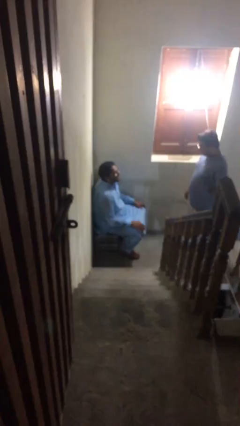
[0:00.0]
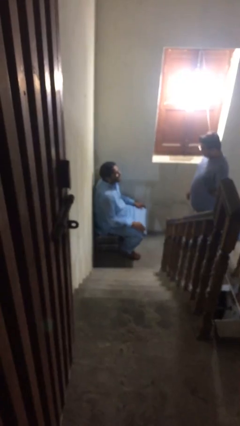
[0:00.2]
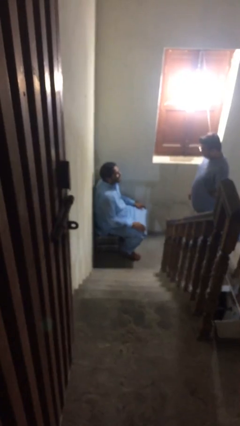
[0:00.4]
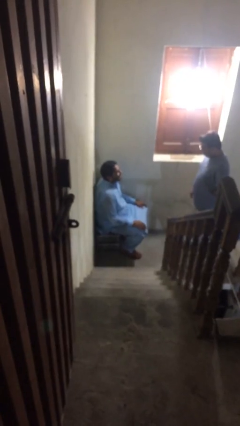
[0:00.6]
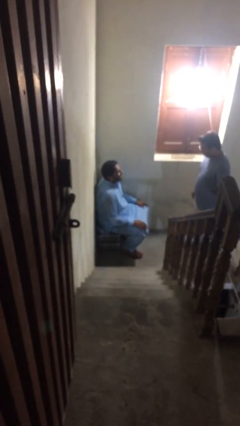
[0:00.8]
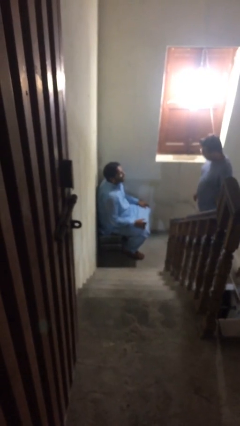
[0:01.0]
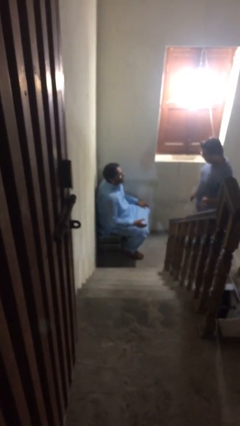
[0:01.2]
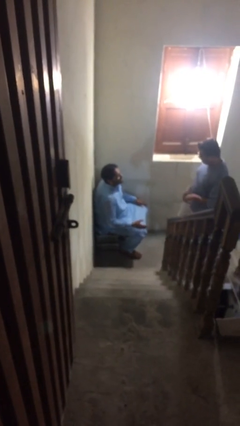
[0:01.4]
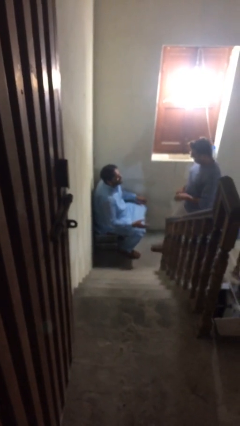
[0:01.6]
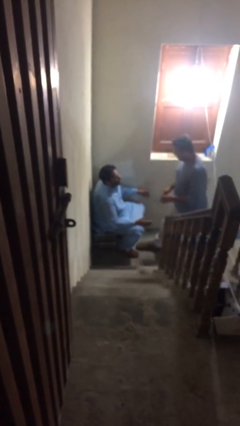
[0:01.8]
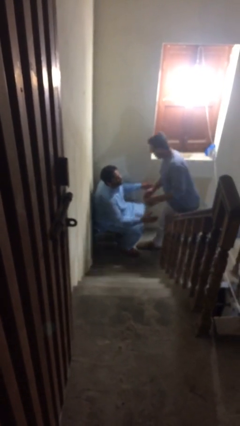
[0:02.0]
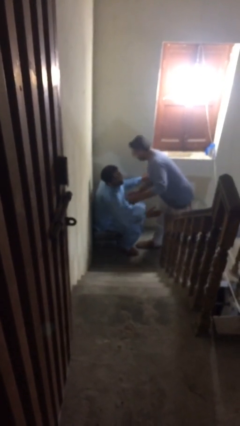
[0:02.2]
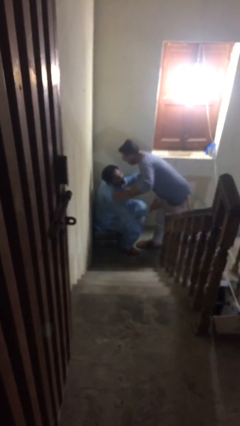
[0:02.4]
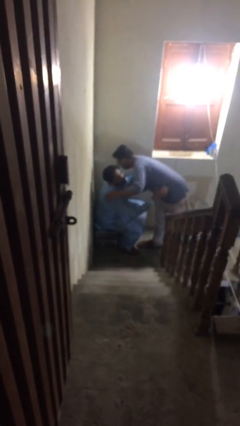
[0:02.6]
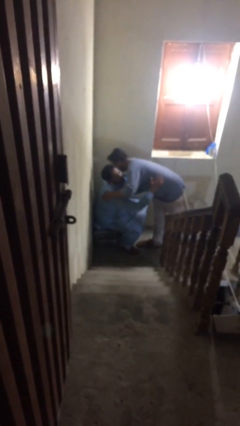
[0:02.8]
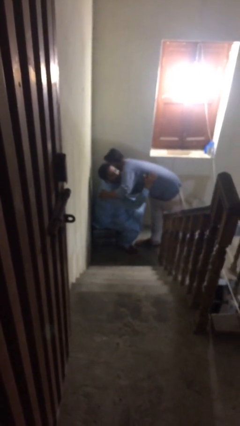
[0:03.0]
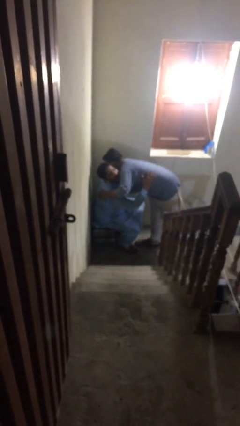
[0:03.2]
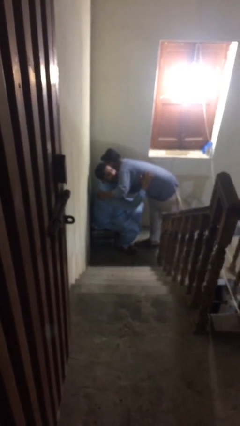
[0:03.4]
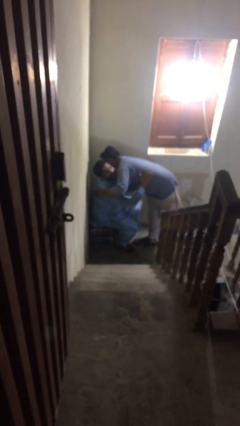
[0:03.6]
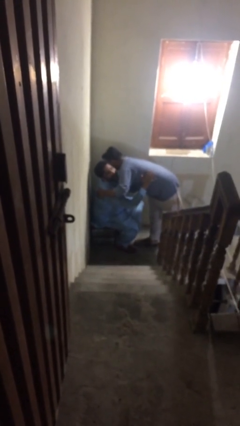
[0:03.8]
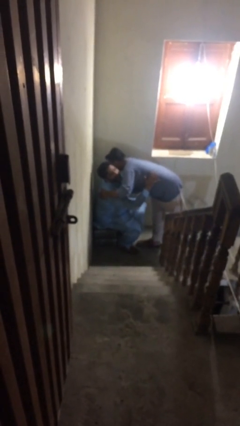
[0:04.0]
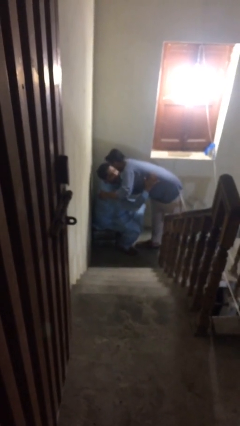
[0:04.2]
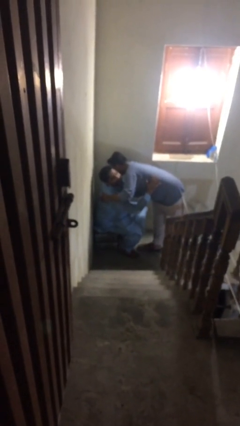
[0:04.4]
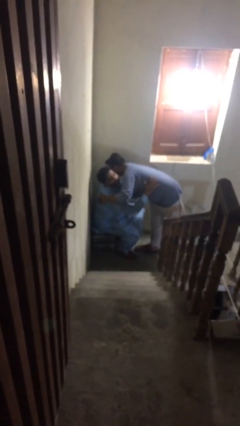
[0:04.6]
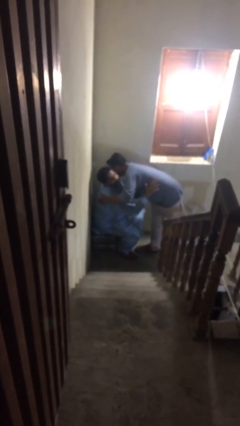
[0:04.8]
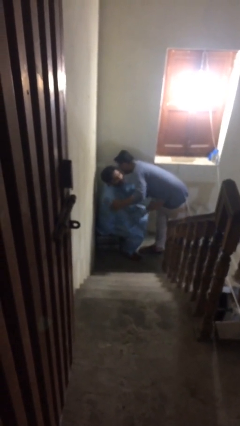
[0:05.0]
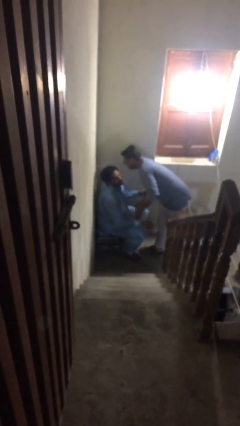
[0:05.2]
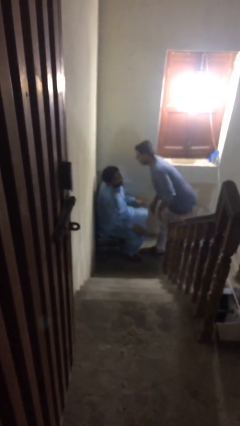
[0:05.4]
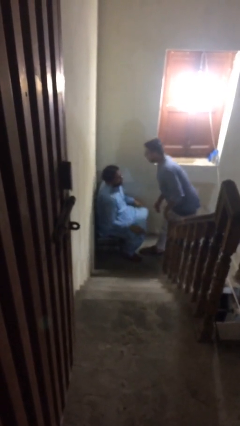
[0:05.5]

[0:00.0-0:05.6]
person embraces person

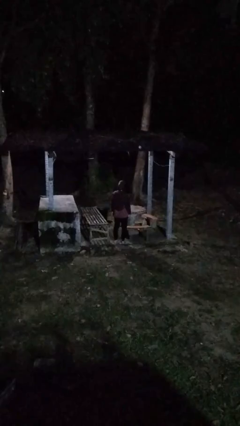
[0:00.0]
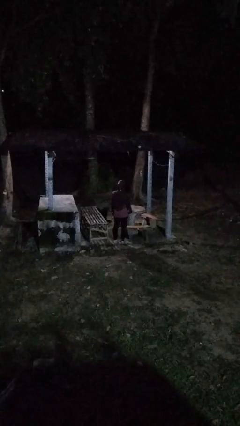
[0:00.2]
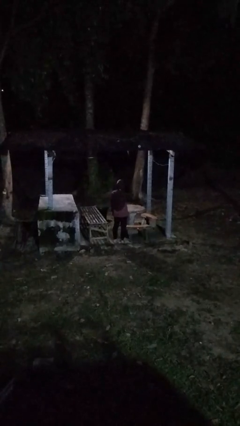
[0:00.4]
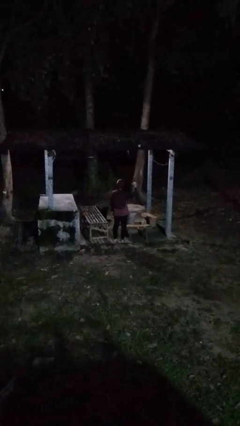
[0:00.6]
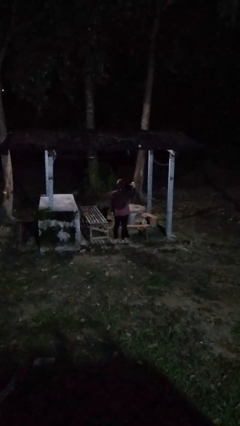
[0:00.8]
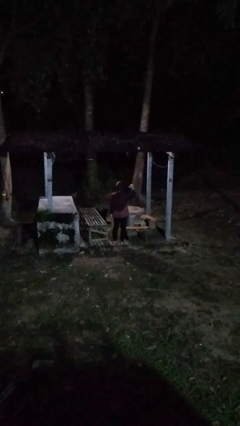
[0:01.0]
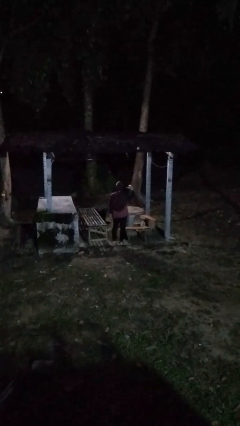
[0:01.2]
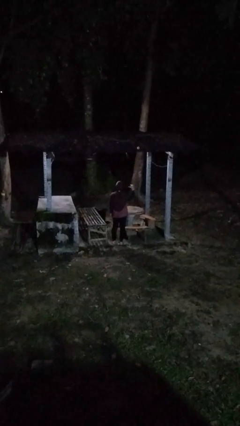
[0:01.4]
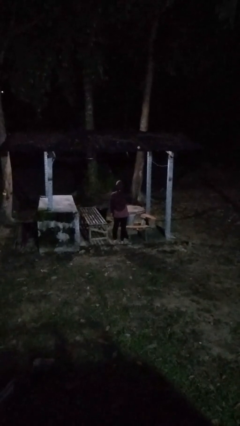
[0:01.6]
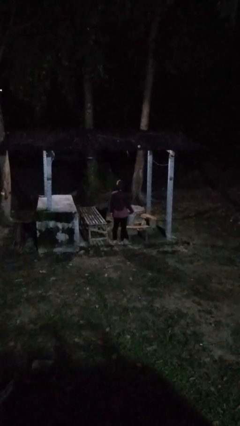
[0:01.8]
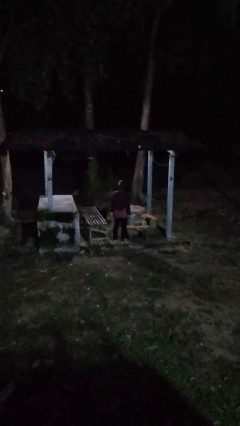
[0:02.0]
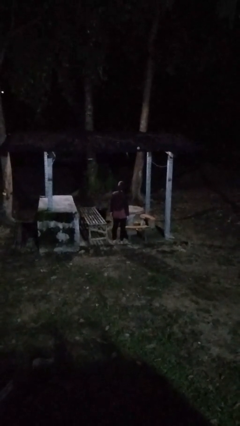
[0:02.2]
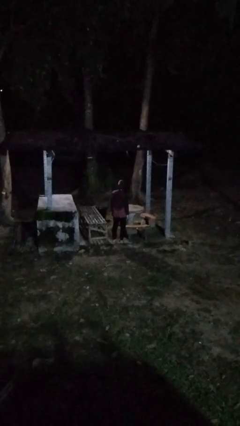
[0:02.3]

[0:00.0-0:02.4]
person gestures behind me

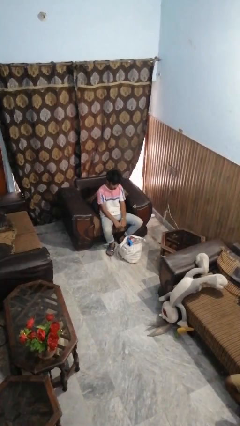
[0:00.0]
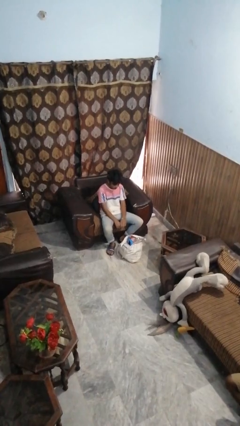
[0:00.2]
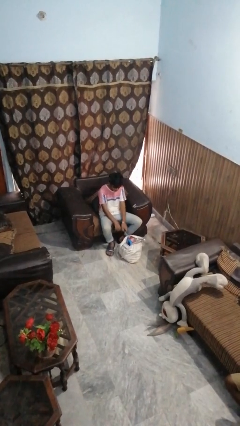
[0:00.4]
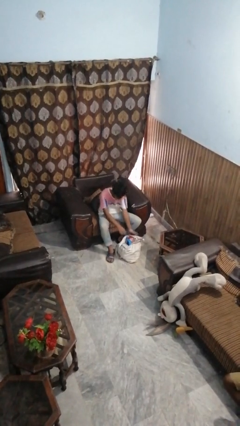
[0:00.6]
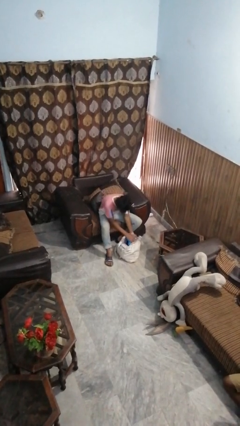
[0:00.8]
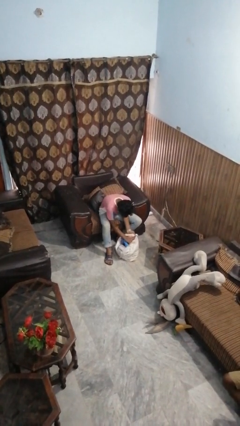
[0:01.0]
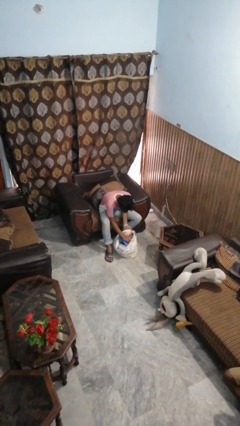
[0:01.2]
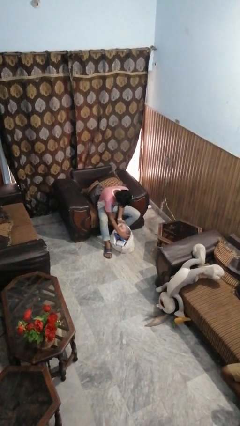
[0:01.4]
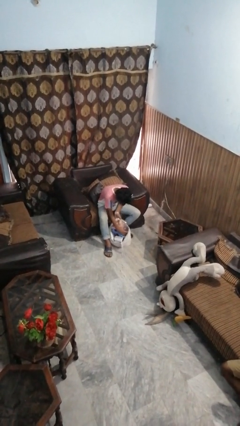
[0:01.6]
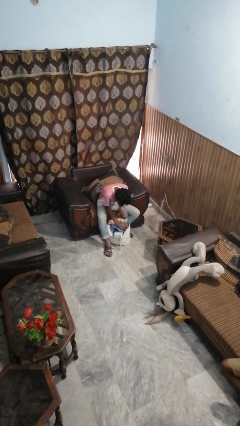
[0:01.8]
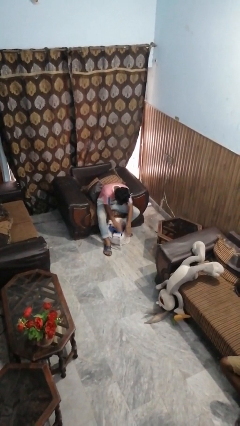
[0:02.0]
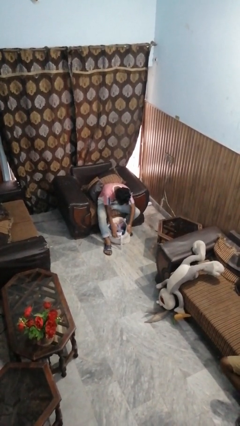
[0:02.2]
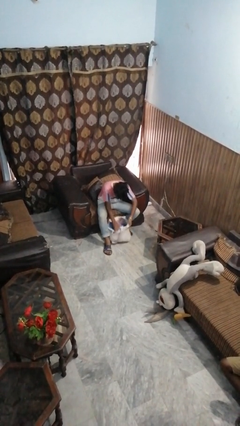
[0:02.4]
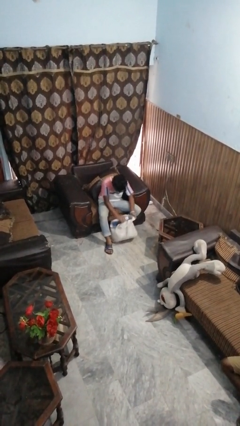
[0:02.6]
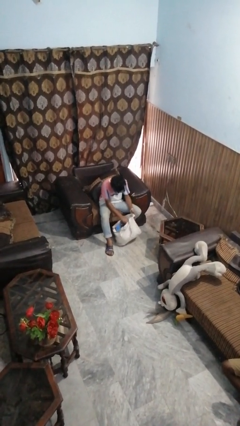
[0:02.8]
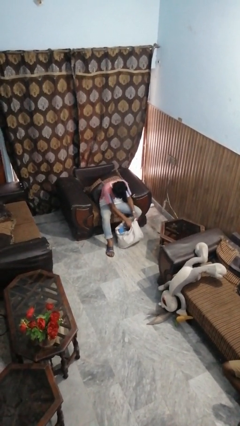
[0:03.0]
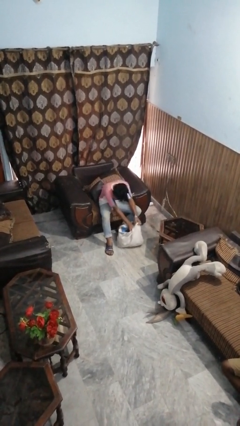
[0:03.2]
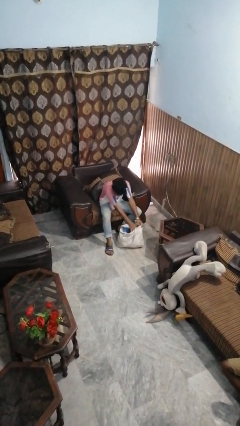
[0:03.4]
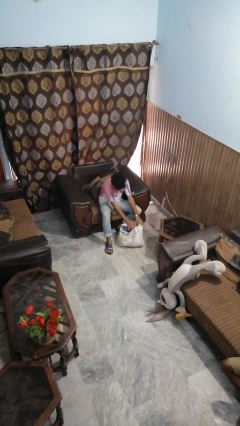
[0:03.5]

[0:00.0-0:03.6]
person searches in bag

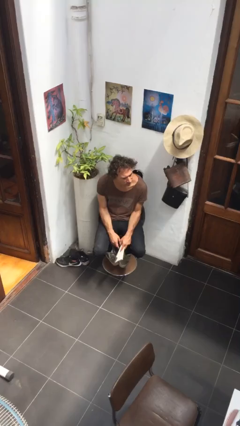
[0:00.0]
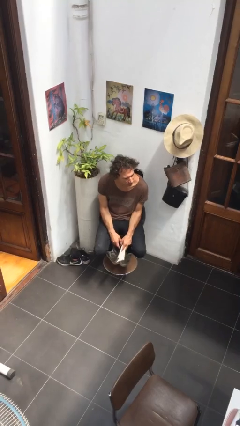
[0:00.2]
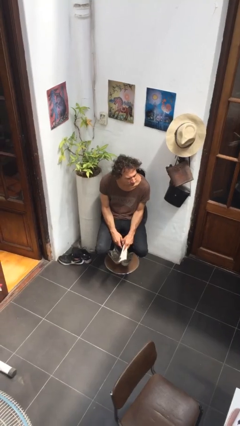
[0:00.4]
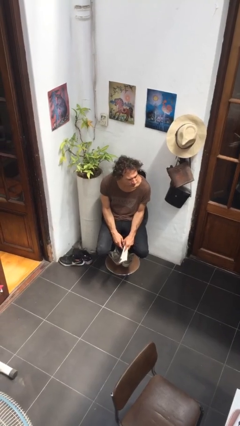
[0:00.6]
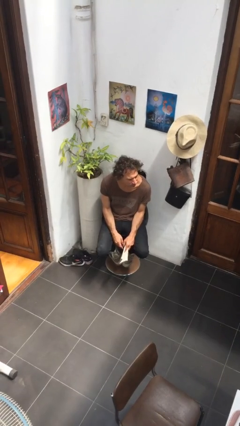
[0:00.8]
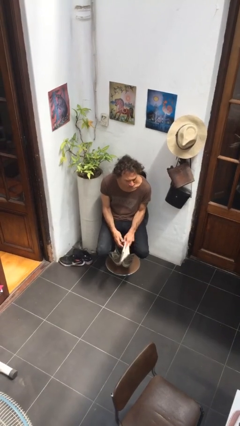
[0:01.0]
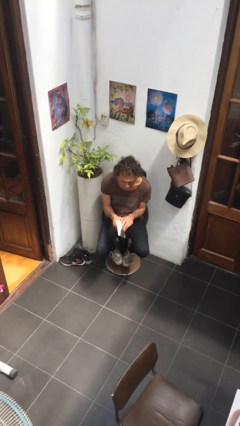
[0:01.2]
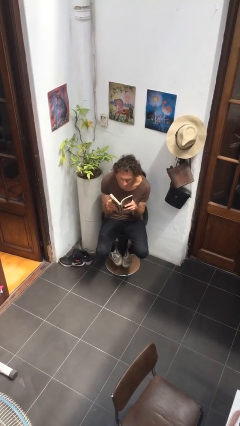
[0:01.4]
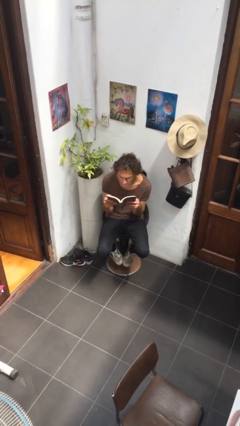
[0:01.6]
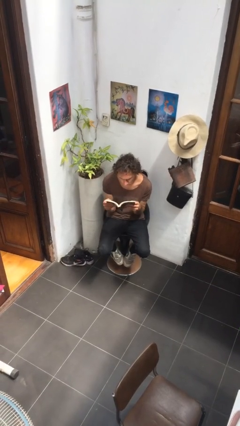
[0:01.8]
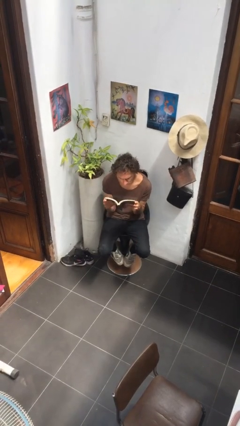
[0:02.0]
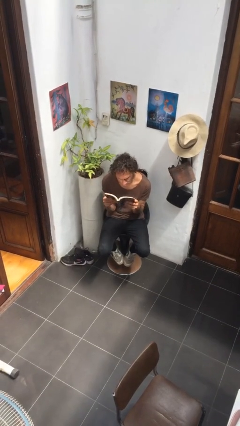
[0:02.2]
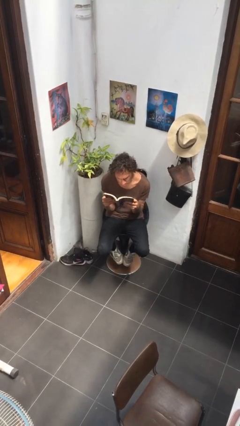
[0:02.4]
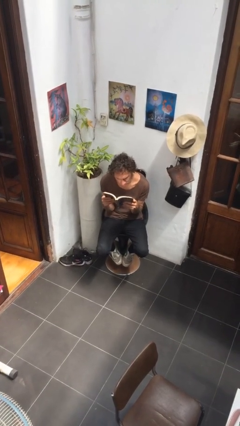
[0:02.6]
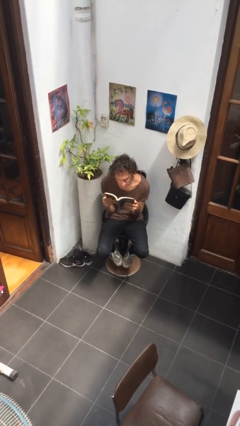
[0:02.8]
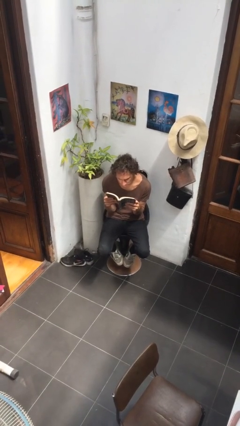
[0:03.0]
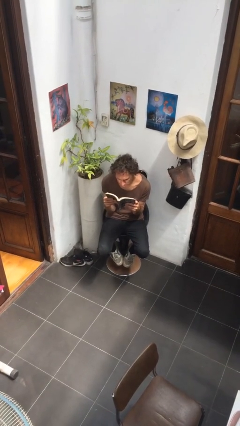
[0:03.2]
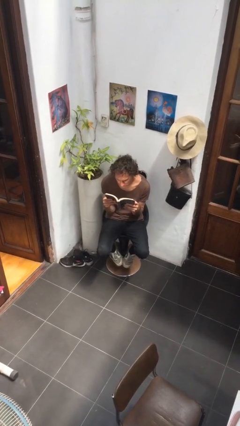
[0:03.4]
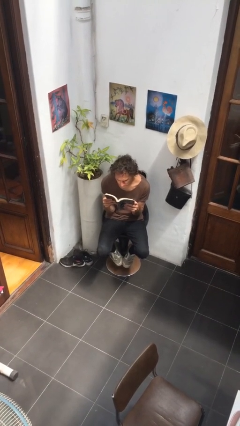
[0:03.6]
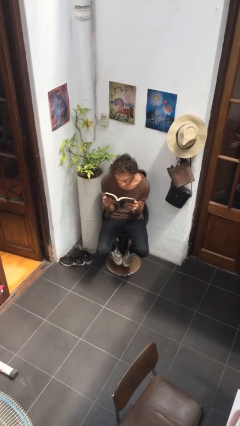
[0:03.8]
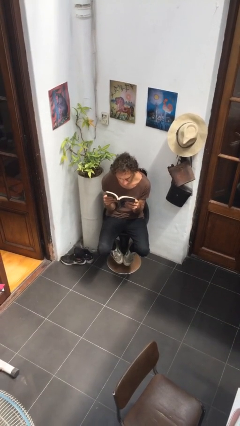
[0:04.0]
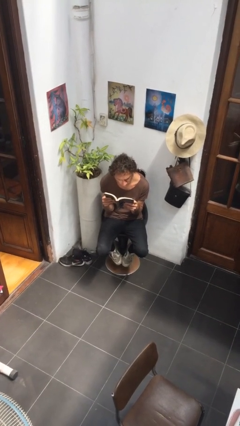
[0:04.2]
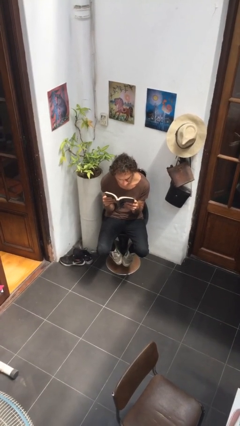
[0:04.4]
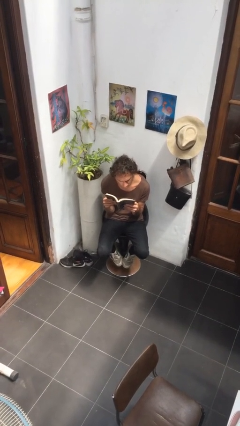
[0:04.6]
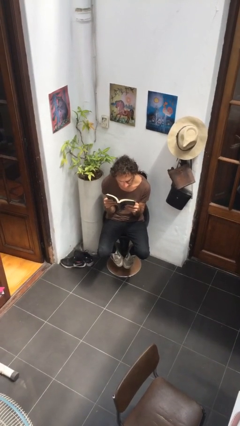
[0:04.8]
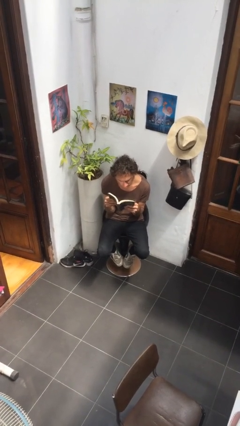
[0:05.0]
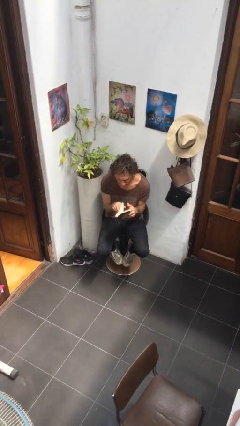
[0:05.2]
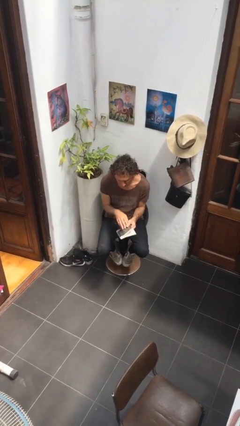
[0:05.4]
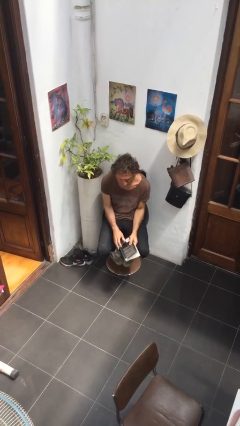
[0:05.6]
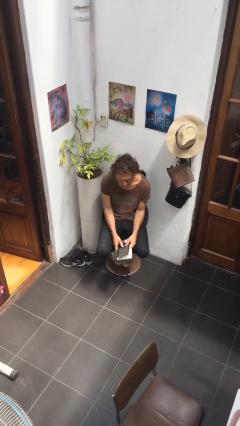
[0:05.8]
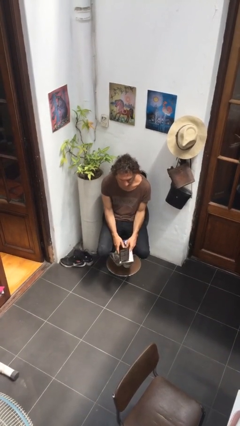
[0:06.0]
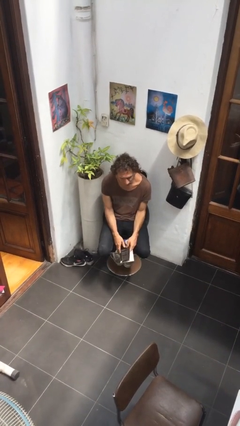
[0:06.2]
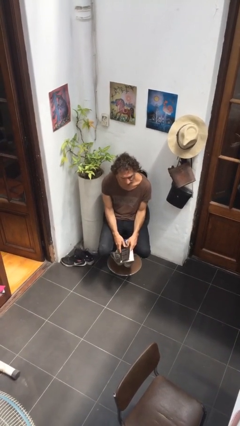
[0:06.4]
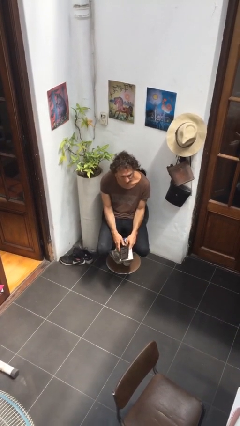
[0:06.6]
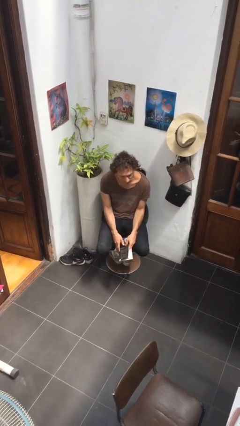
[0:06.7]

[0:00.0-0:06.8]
person reads document
